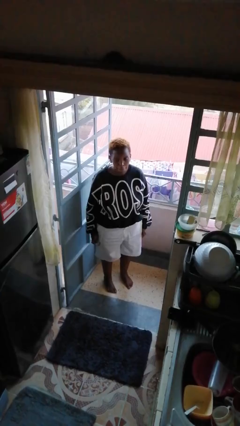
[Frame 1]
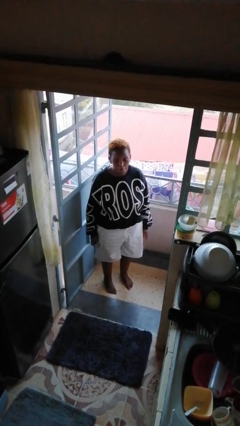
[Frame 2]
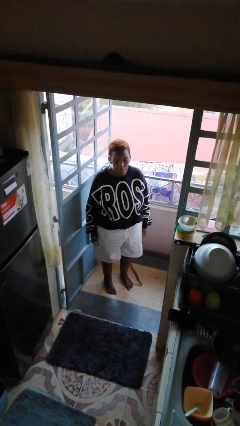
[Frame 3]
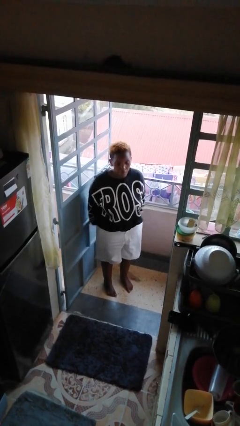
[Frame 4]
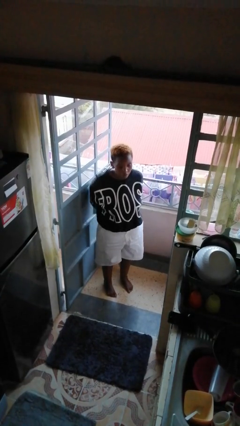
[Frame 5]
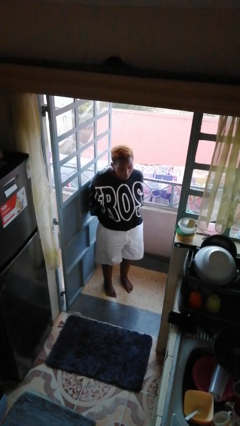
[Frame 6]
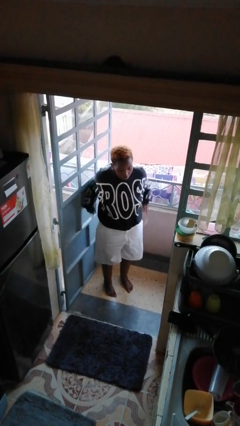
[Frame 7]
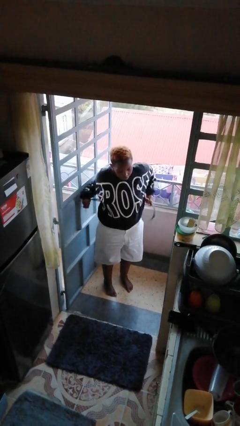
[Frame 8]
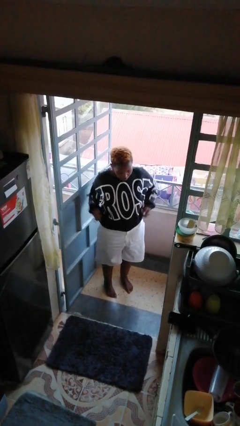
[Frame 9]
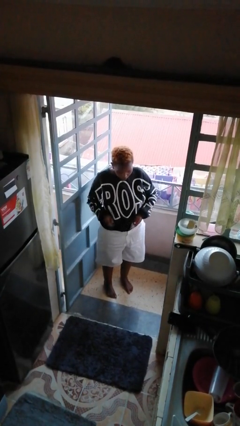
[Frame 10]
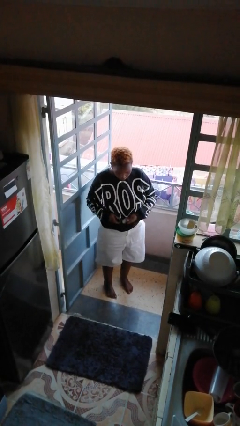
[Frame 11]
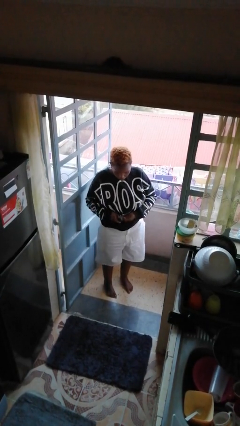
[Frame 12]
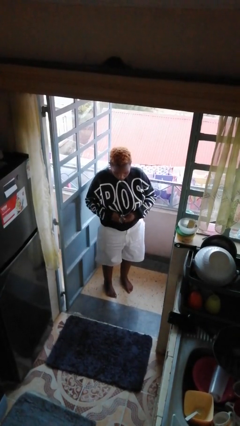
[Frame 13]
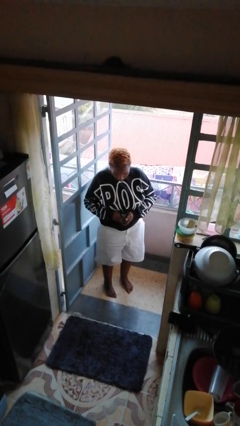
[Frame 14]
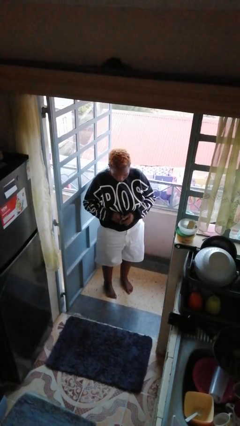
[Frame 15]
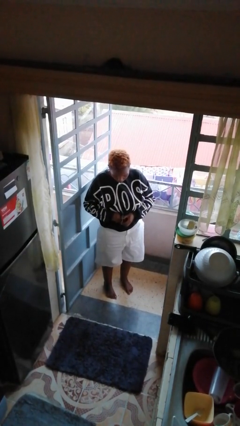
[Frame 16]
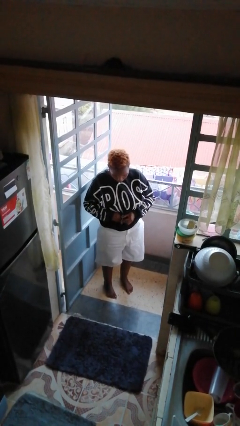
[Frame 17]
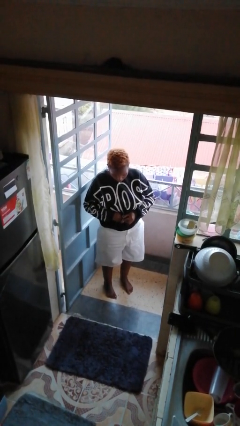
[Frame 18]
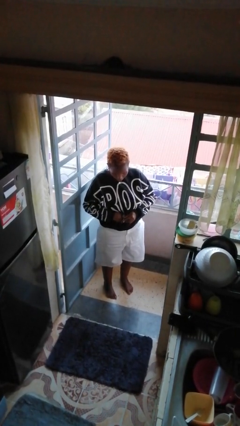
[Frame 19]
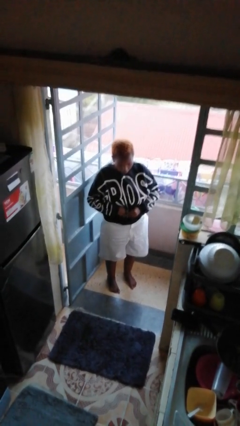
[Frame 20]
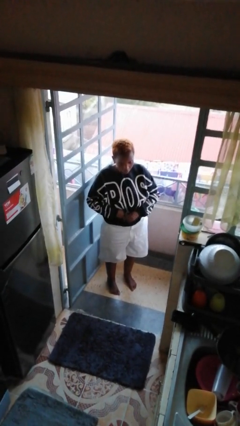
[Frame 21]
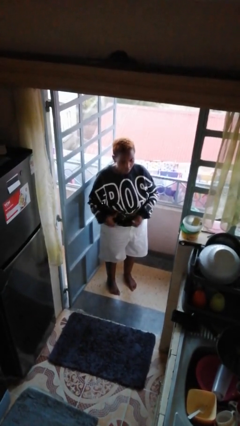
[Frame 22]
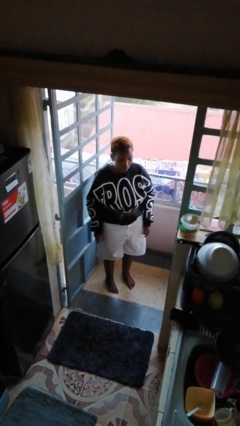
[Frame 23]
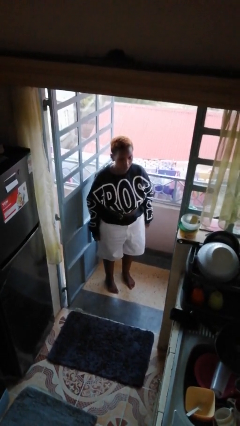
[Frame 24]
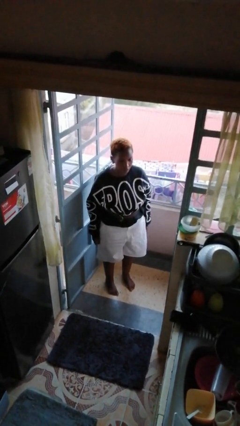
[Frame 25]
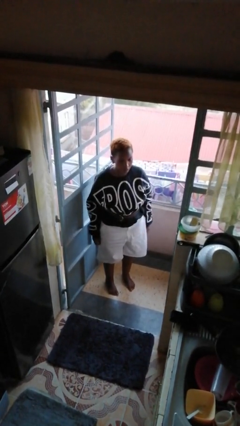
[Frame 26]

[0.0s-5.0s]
person puts on belt

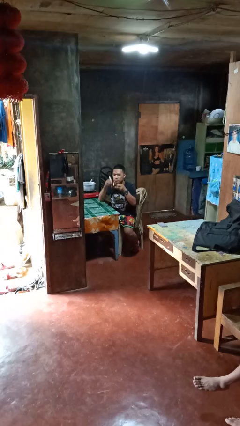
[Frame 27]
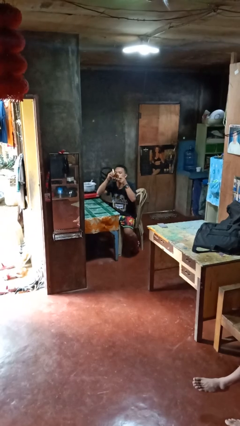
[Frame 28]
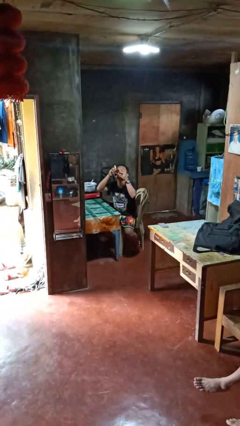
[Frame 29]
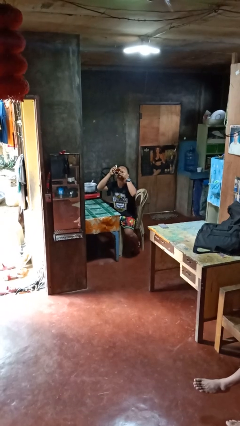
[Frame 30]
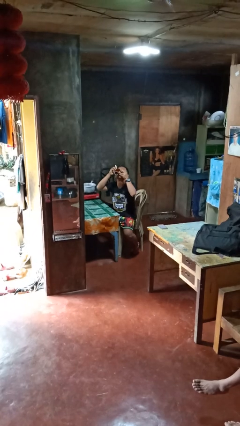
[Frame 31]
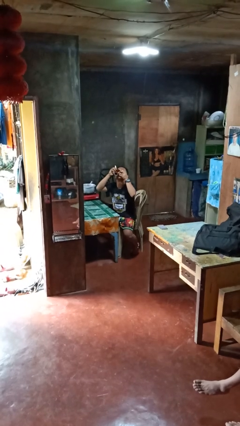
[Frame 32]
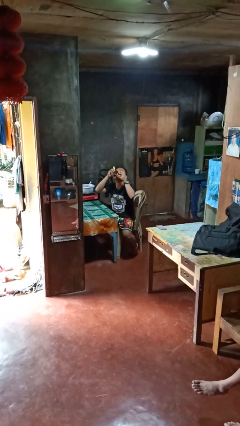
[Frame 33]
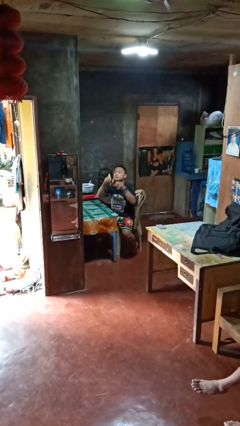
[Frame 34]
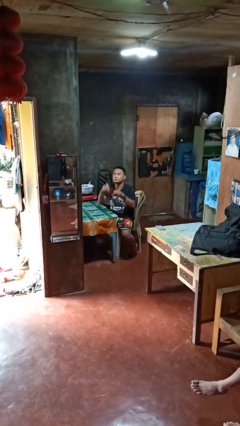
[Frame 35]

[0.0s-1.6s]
person drinks from mug

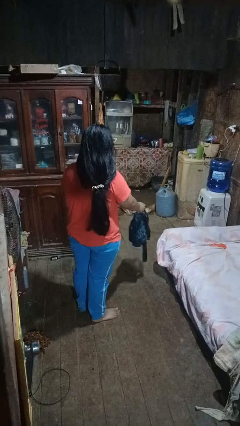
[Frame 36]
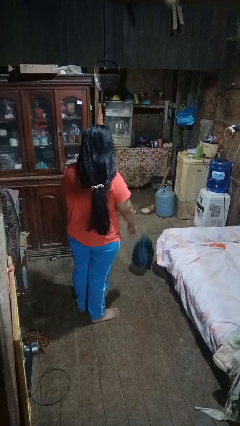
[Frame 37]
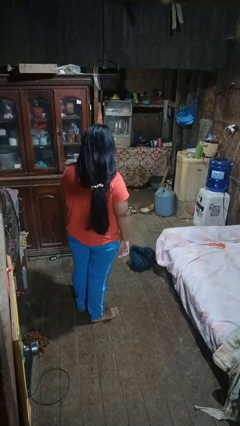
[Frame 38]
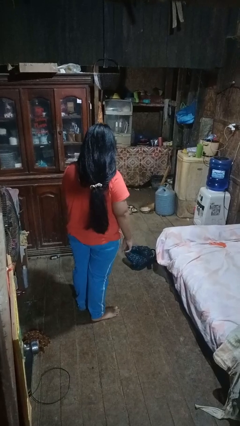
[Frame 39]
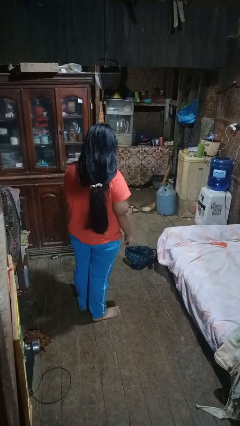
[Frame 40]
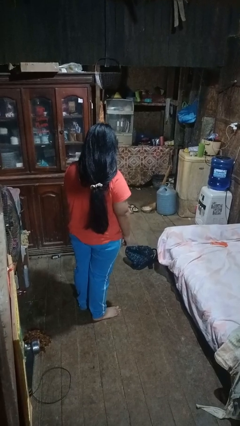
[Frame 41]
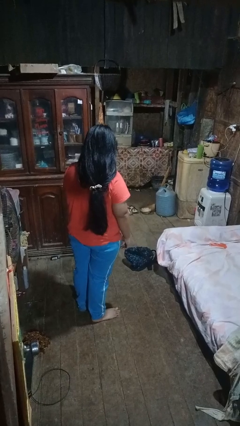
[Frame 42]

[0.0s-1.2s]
person throws object to ground

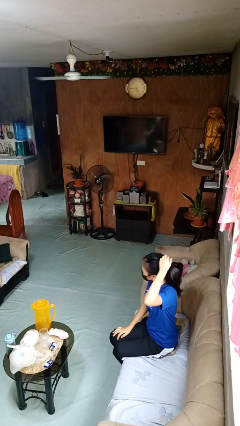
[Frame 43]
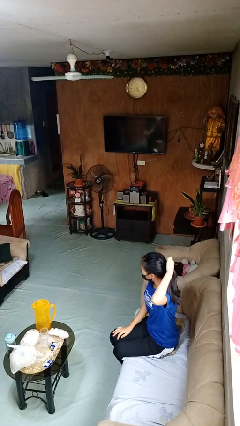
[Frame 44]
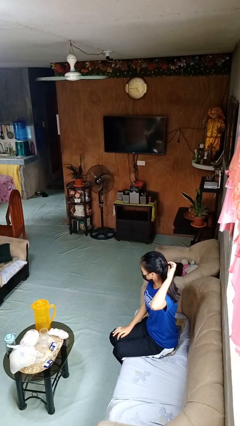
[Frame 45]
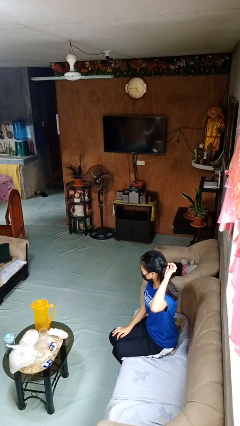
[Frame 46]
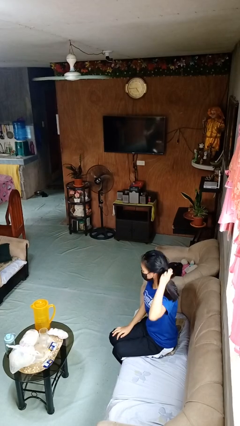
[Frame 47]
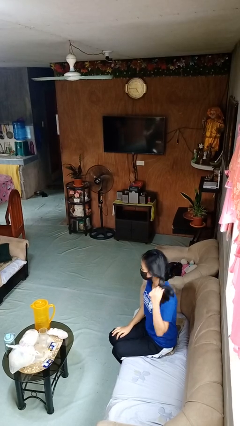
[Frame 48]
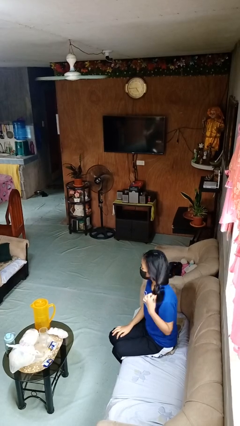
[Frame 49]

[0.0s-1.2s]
person takes off hairtie

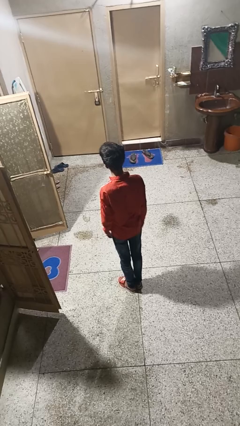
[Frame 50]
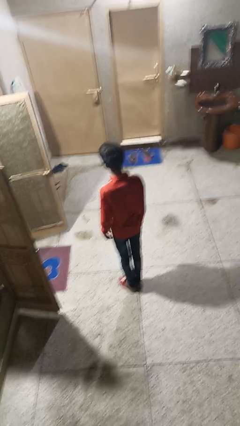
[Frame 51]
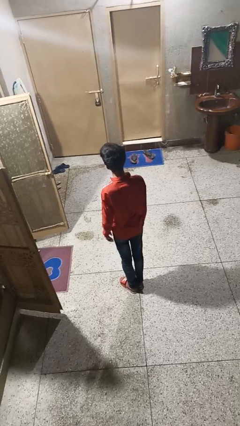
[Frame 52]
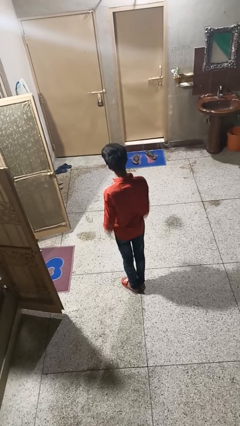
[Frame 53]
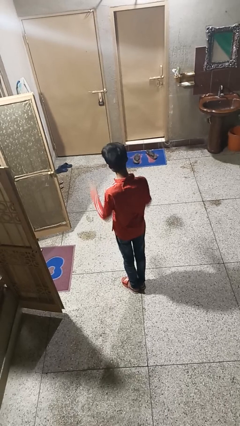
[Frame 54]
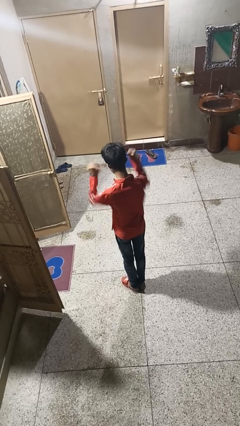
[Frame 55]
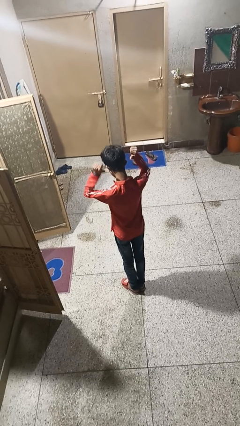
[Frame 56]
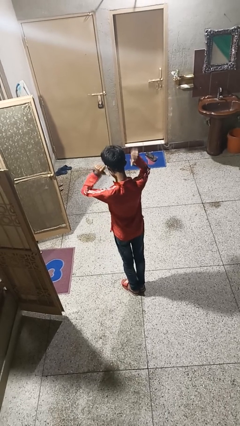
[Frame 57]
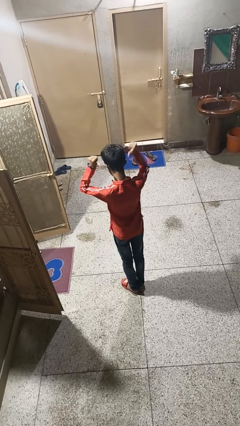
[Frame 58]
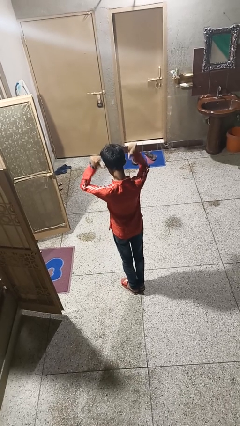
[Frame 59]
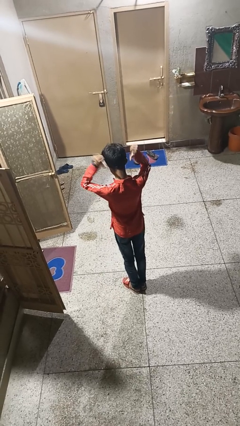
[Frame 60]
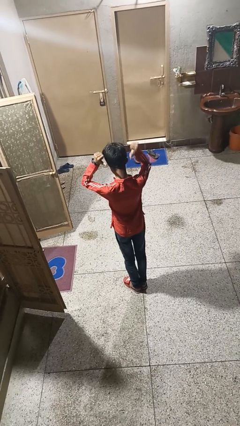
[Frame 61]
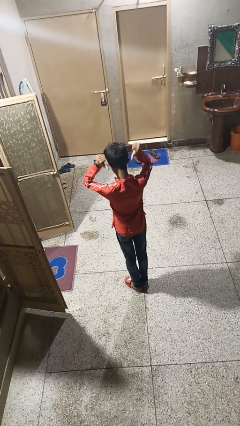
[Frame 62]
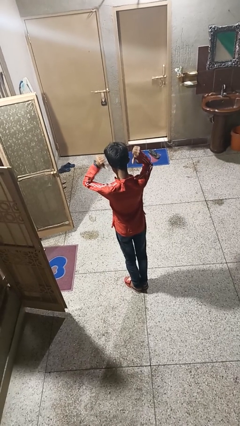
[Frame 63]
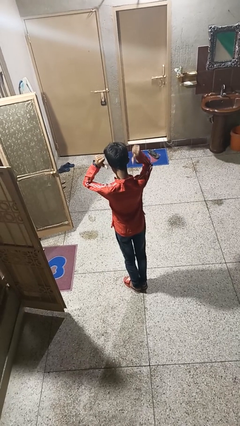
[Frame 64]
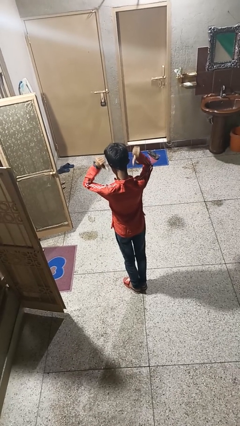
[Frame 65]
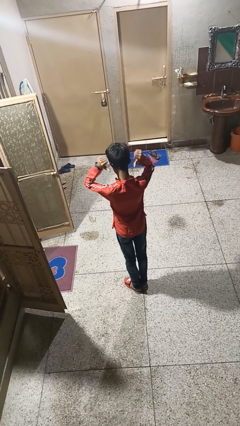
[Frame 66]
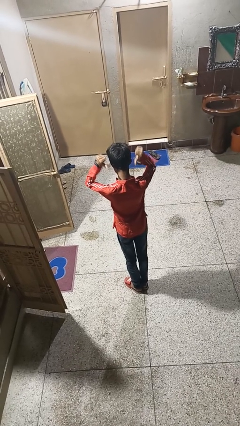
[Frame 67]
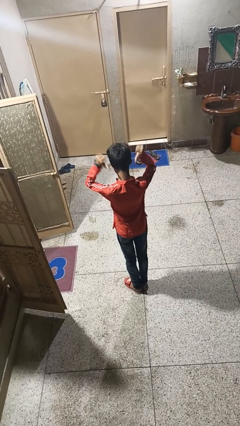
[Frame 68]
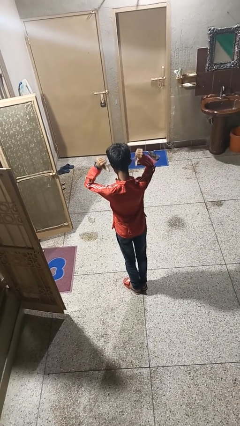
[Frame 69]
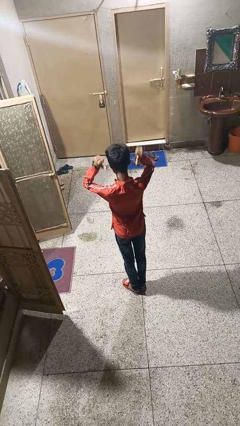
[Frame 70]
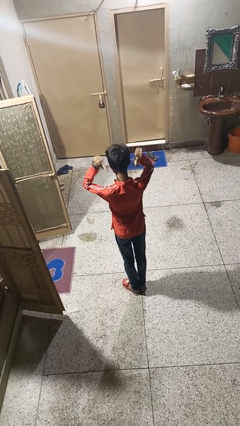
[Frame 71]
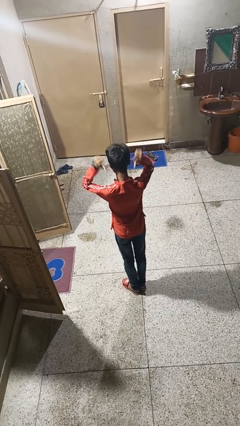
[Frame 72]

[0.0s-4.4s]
person gestures behind me

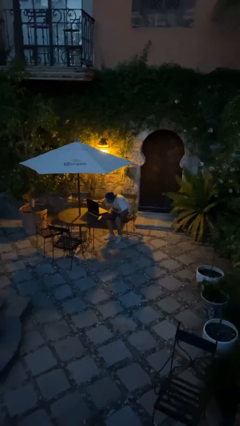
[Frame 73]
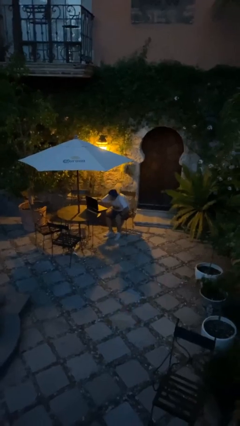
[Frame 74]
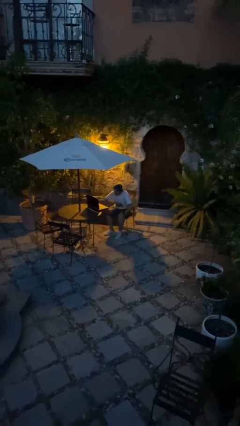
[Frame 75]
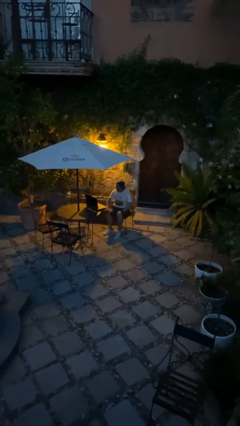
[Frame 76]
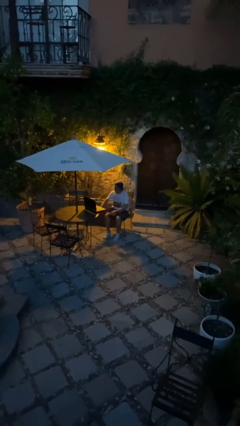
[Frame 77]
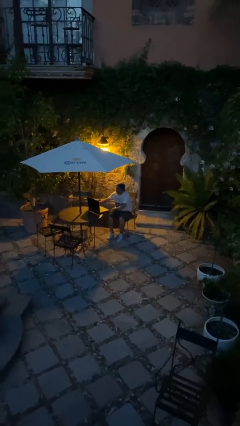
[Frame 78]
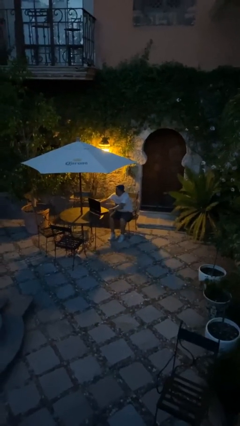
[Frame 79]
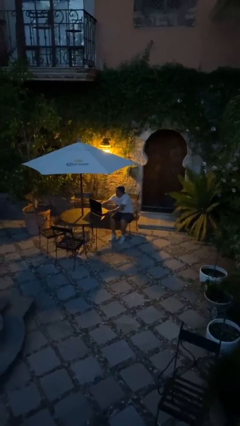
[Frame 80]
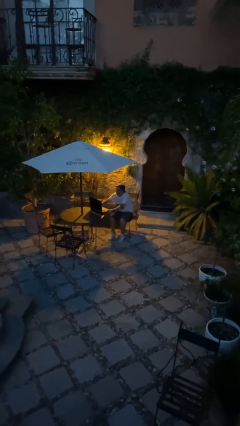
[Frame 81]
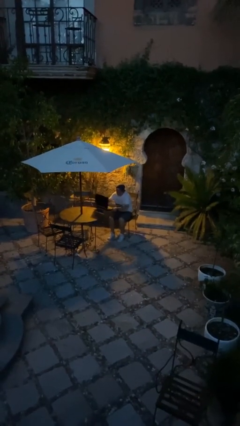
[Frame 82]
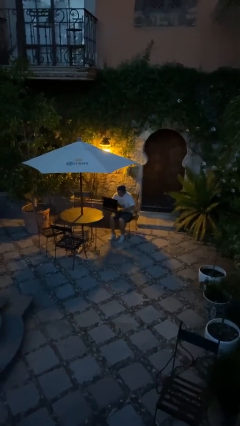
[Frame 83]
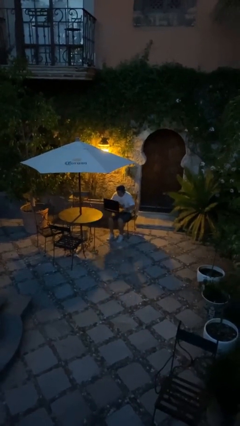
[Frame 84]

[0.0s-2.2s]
person sits down

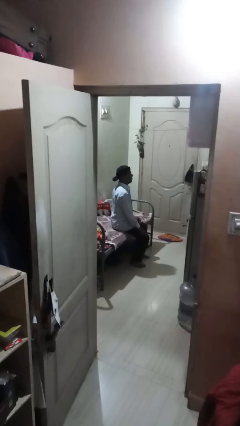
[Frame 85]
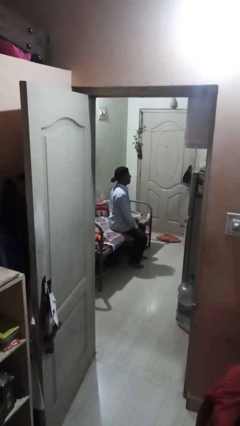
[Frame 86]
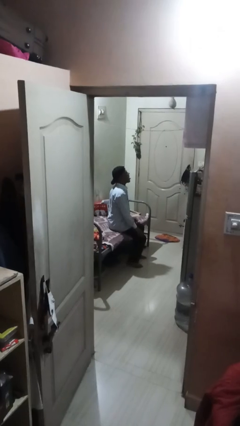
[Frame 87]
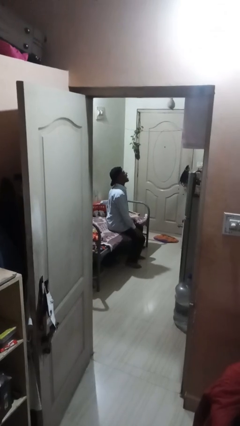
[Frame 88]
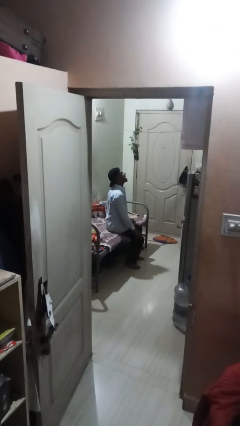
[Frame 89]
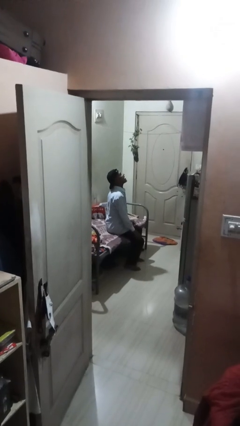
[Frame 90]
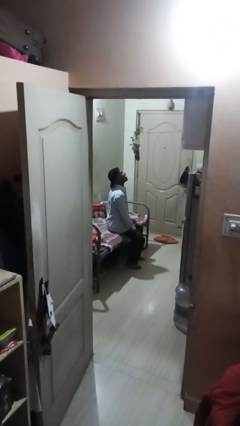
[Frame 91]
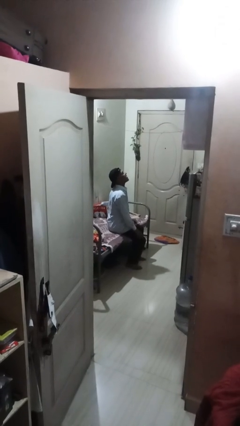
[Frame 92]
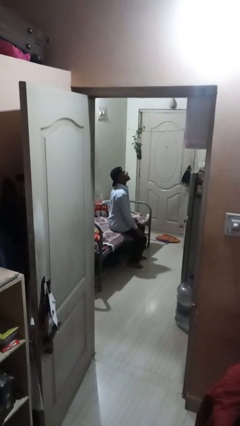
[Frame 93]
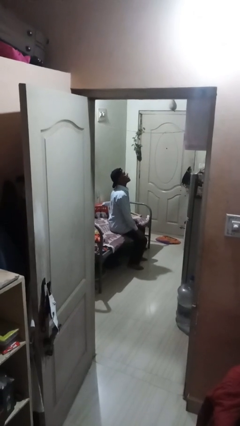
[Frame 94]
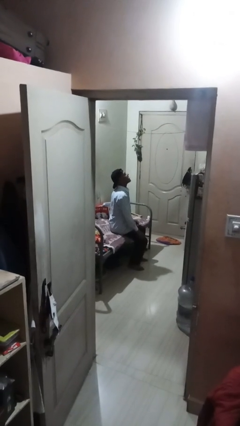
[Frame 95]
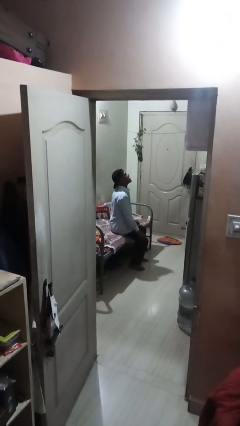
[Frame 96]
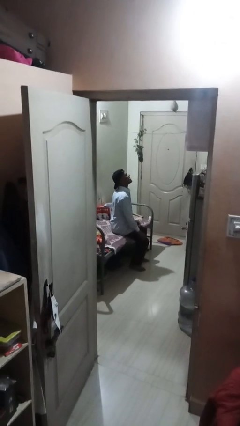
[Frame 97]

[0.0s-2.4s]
person sticks out tongue
